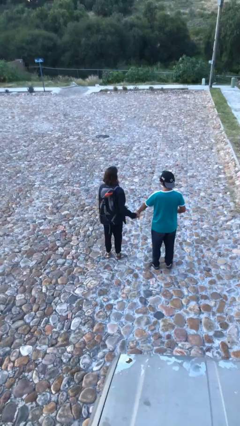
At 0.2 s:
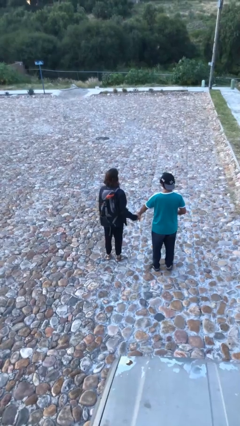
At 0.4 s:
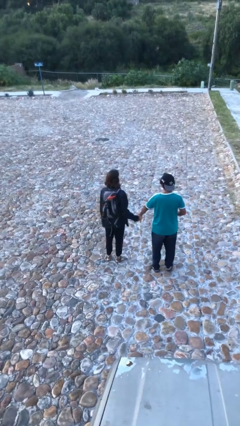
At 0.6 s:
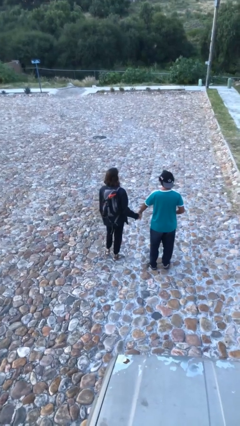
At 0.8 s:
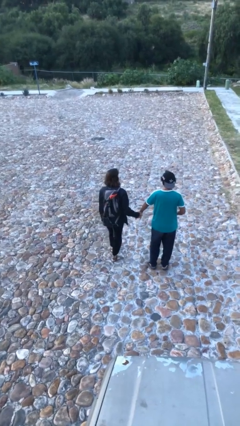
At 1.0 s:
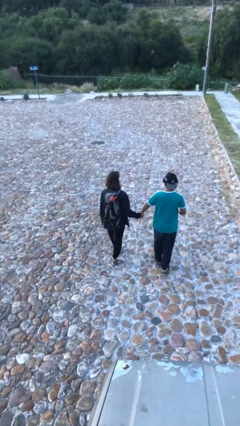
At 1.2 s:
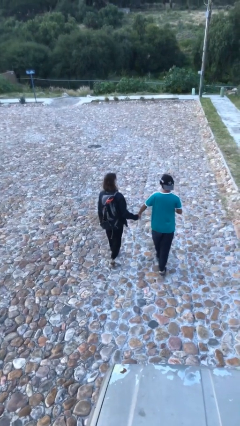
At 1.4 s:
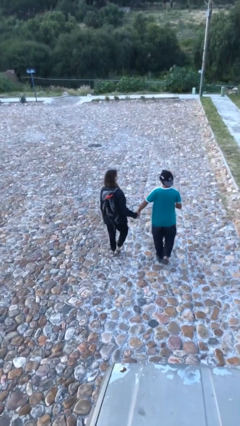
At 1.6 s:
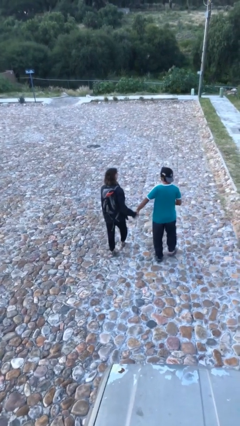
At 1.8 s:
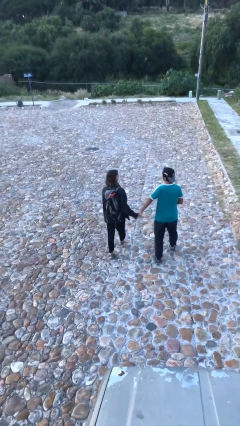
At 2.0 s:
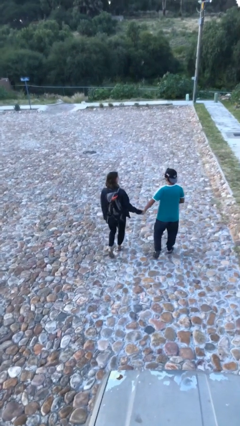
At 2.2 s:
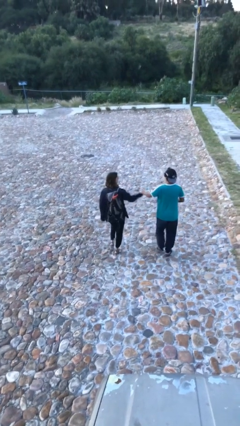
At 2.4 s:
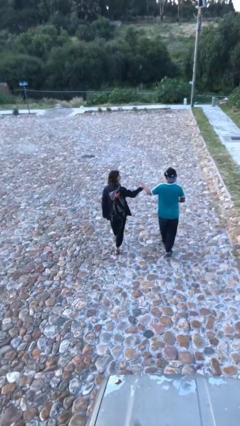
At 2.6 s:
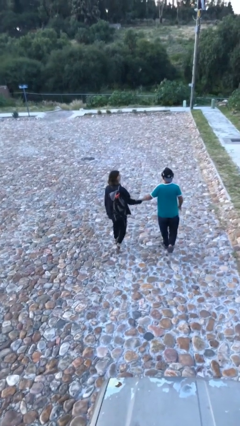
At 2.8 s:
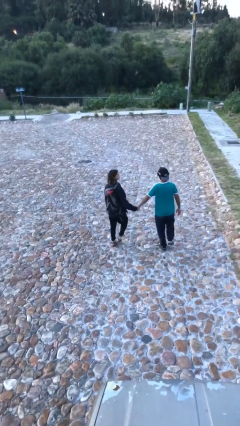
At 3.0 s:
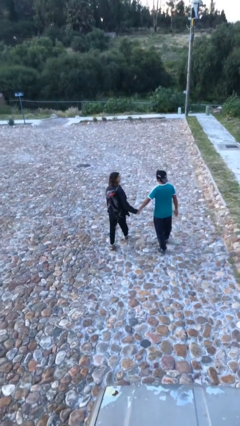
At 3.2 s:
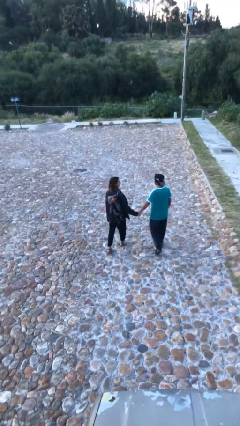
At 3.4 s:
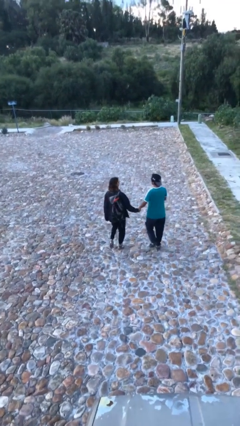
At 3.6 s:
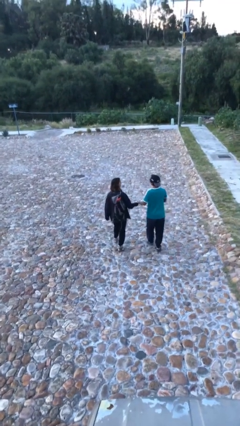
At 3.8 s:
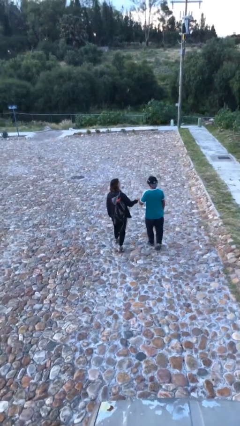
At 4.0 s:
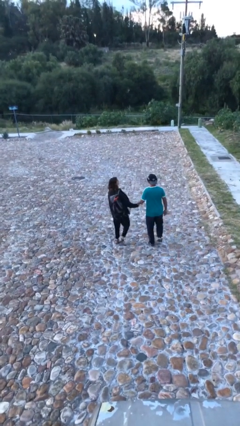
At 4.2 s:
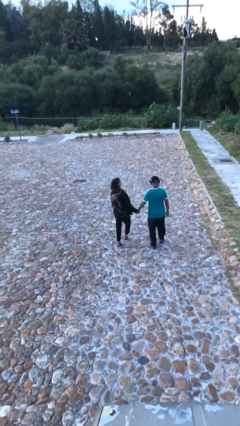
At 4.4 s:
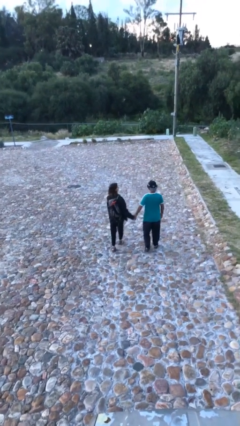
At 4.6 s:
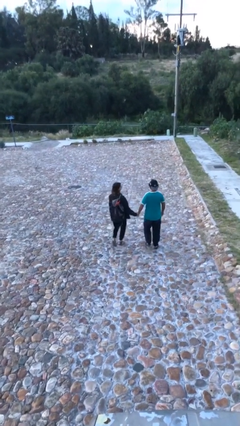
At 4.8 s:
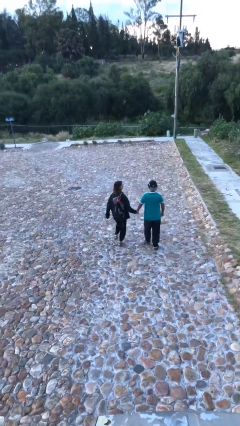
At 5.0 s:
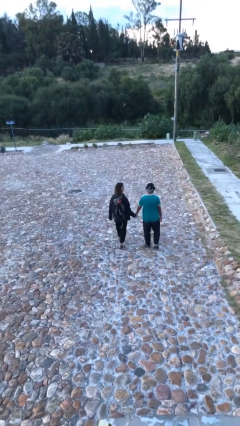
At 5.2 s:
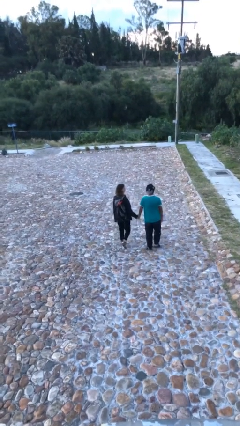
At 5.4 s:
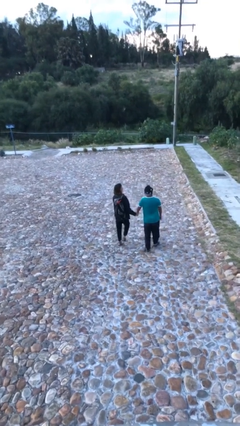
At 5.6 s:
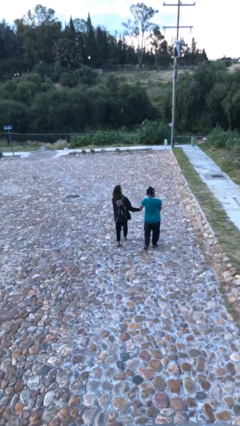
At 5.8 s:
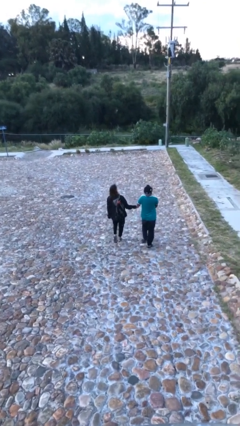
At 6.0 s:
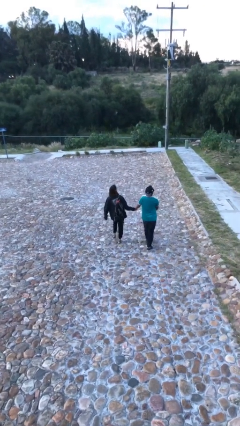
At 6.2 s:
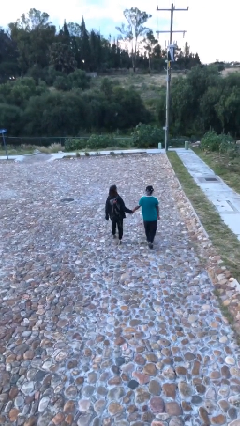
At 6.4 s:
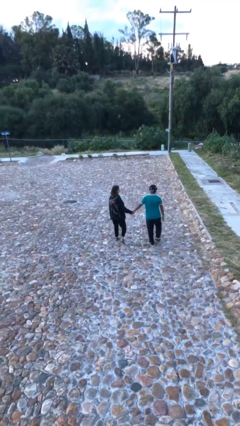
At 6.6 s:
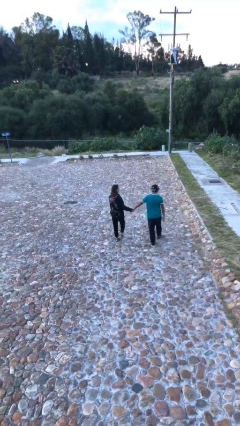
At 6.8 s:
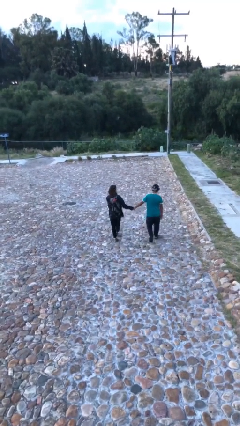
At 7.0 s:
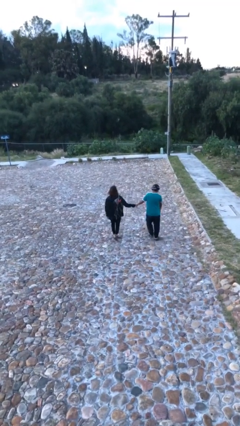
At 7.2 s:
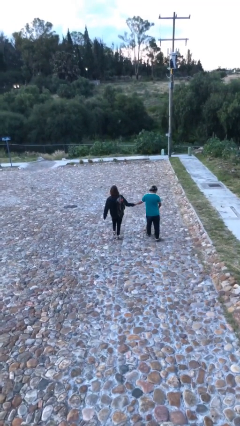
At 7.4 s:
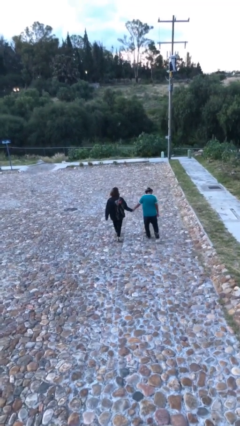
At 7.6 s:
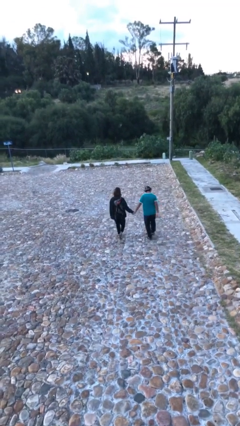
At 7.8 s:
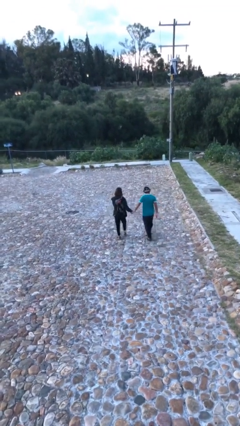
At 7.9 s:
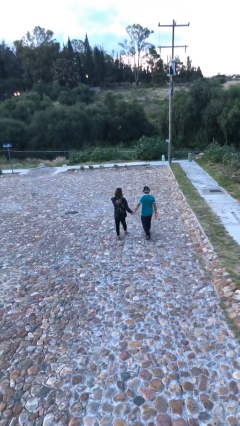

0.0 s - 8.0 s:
person holds hand

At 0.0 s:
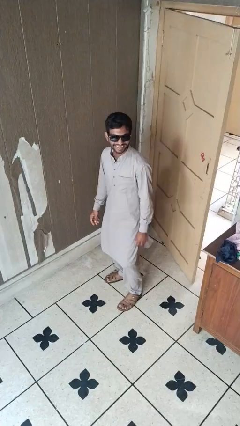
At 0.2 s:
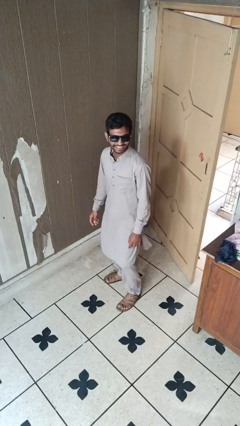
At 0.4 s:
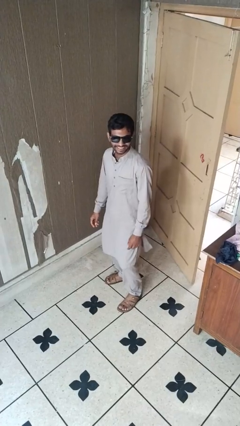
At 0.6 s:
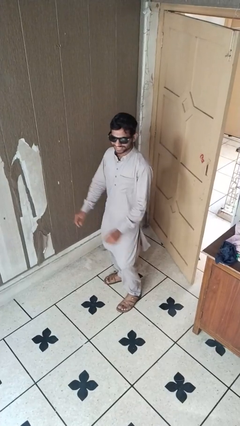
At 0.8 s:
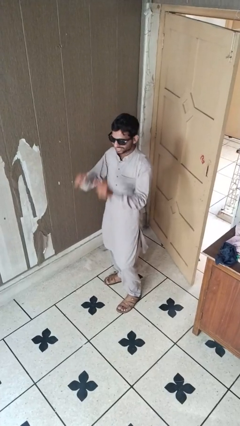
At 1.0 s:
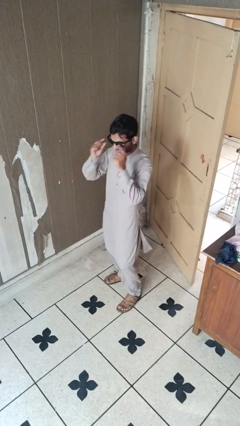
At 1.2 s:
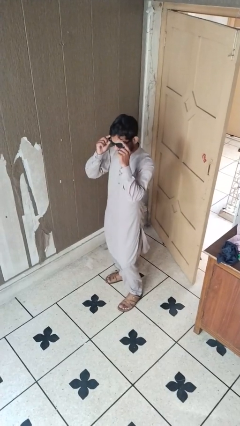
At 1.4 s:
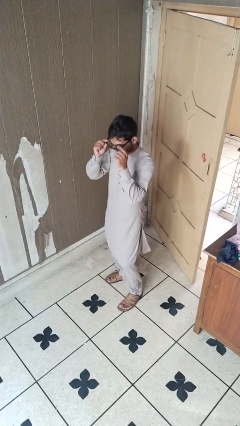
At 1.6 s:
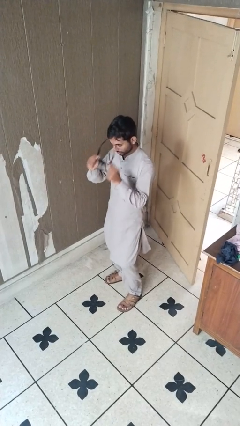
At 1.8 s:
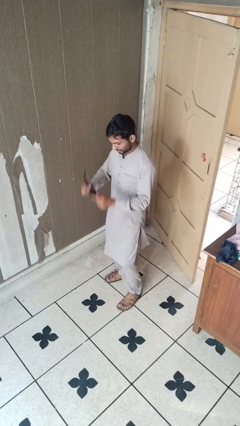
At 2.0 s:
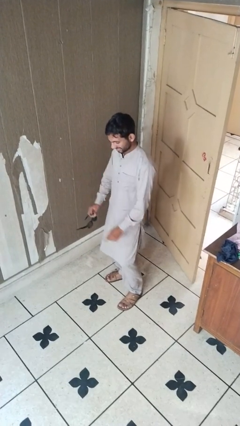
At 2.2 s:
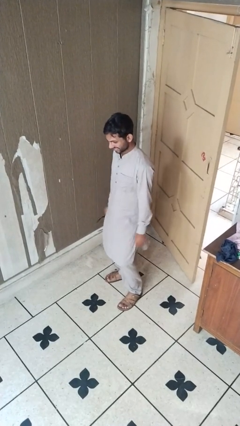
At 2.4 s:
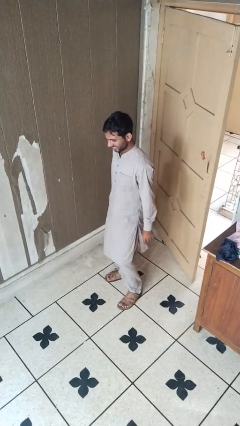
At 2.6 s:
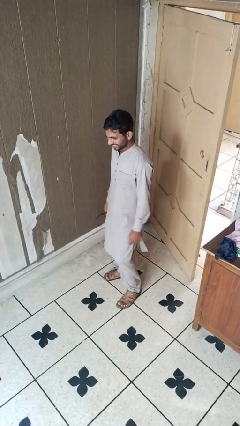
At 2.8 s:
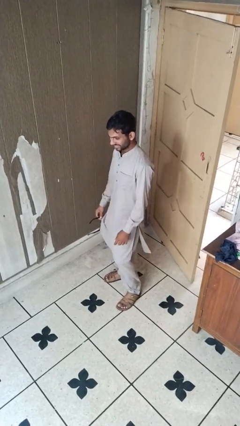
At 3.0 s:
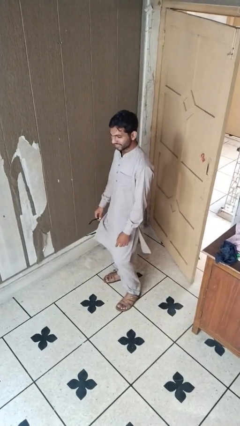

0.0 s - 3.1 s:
person takes off sunglasses

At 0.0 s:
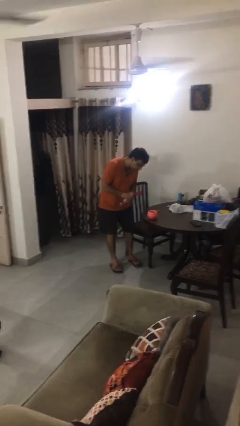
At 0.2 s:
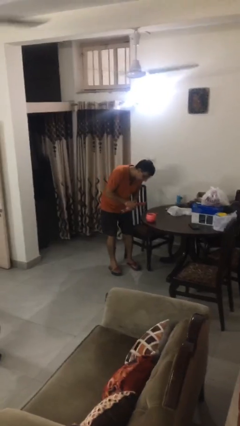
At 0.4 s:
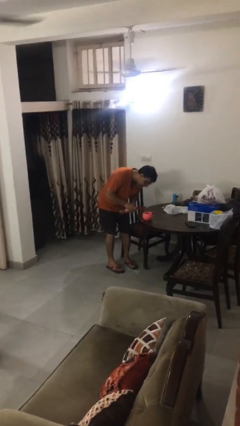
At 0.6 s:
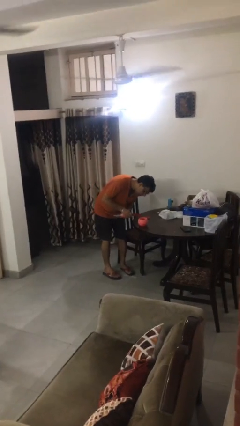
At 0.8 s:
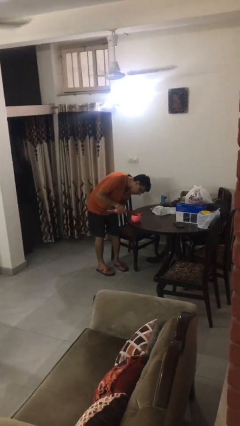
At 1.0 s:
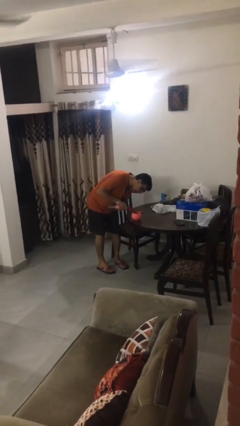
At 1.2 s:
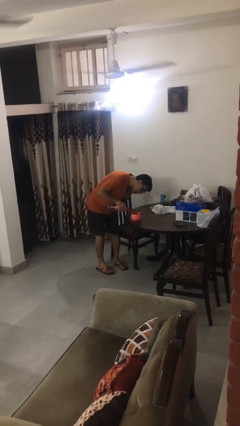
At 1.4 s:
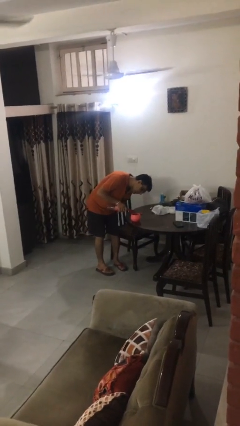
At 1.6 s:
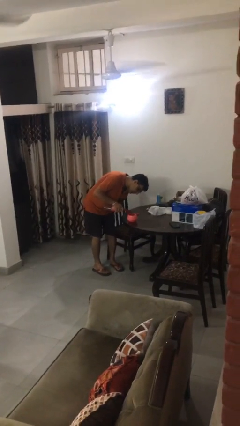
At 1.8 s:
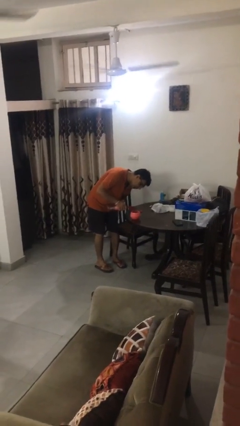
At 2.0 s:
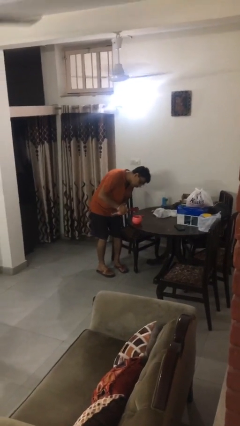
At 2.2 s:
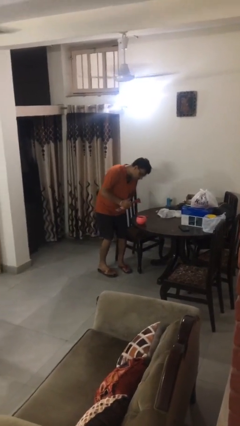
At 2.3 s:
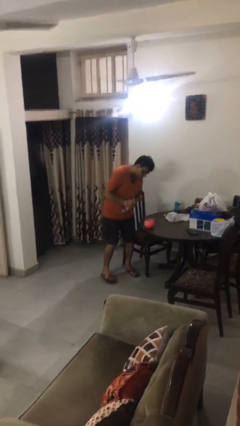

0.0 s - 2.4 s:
person waters houseplant

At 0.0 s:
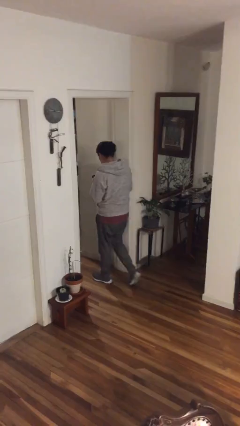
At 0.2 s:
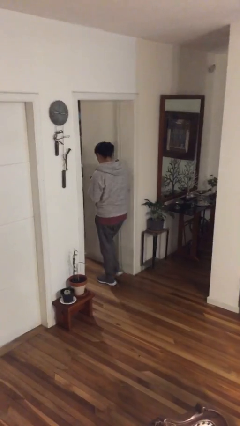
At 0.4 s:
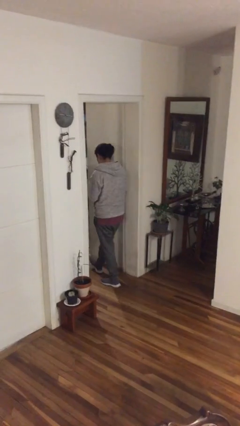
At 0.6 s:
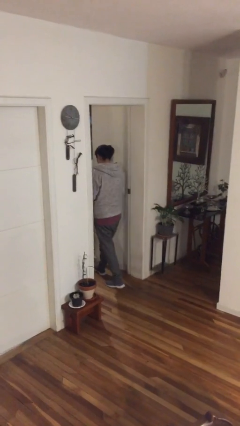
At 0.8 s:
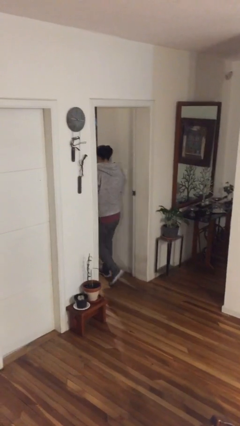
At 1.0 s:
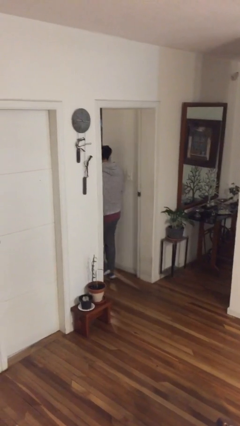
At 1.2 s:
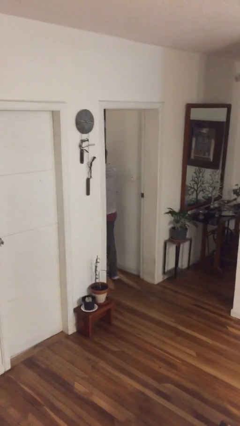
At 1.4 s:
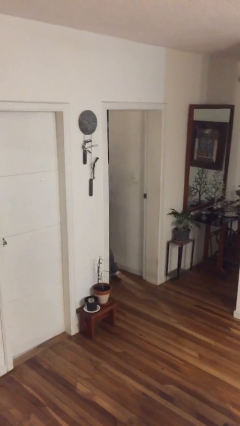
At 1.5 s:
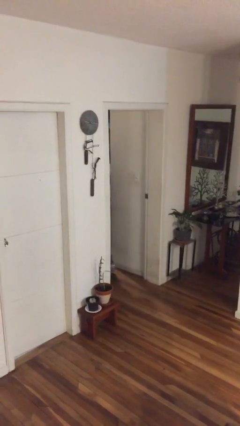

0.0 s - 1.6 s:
person exits scene through structure

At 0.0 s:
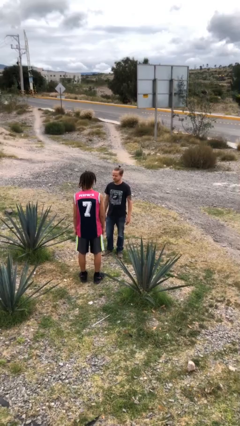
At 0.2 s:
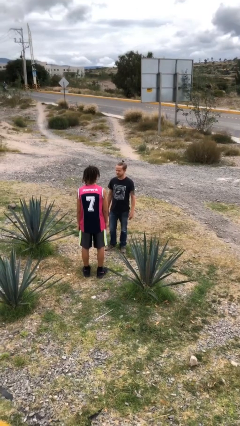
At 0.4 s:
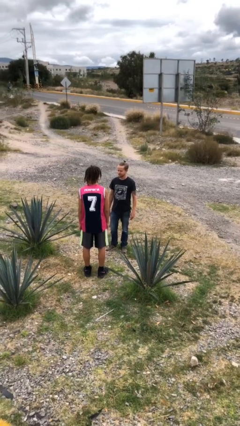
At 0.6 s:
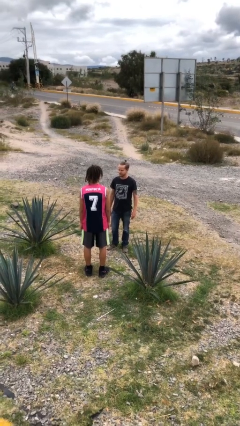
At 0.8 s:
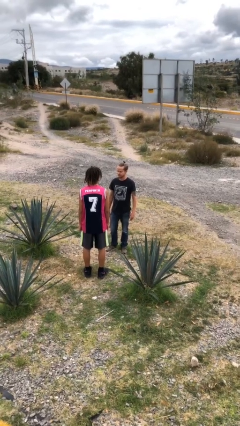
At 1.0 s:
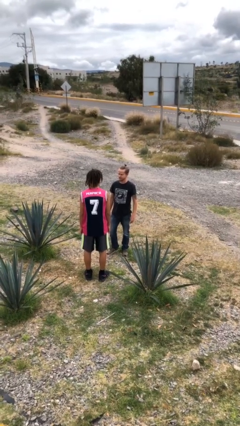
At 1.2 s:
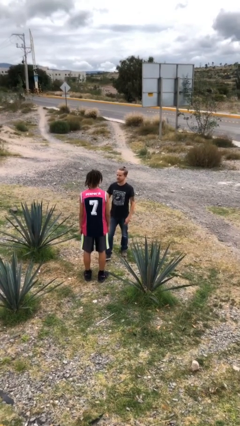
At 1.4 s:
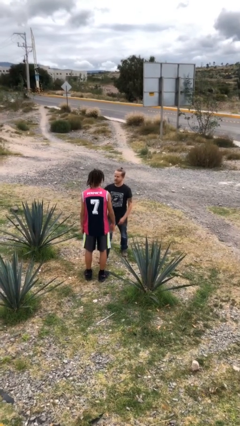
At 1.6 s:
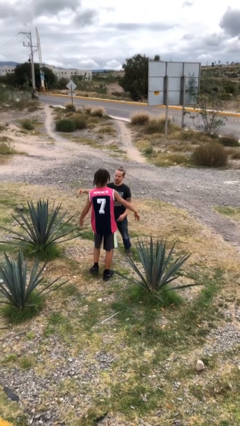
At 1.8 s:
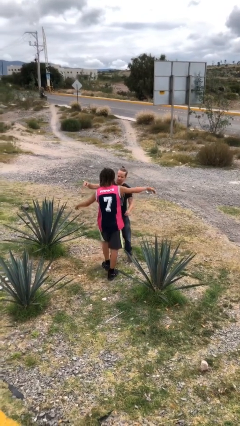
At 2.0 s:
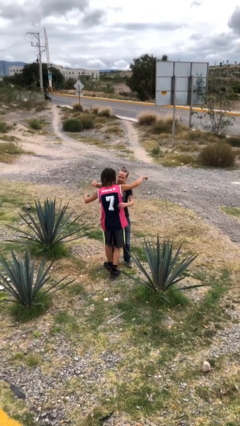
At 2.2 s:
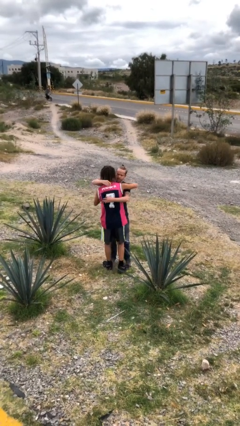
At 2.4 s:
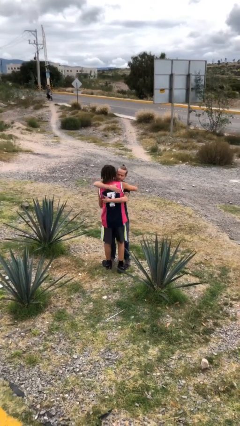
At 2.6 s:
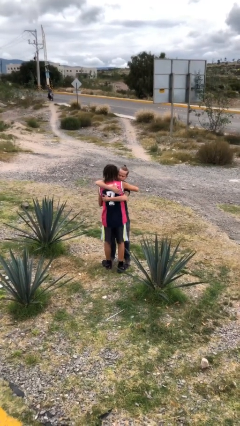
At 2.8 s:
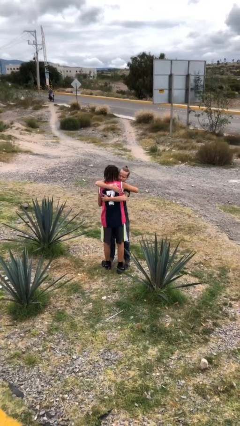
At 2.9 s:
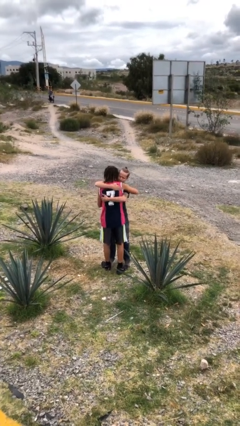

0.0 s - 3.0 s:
person embraces person
